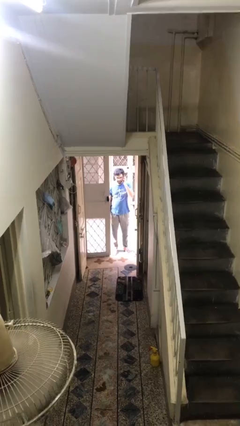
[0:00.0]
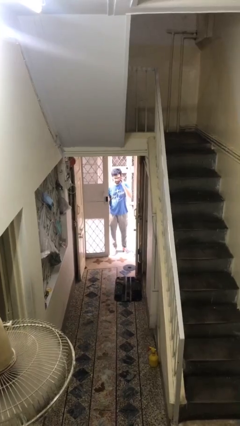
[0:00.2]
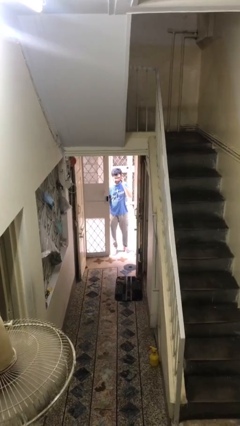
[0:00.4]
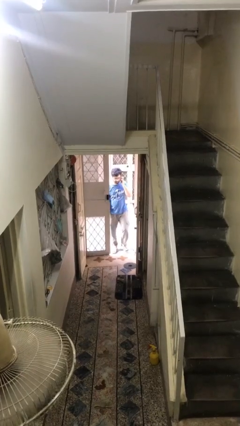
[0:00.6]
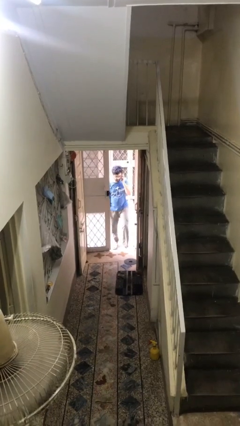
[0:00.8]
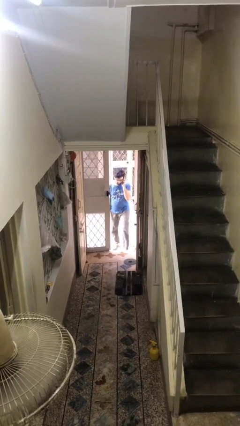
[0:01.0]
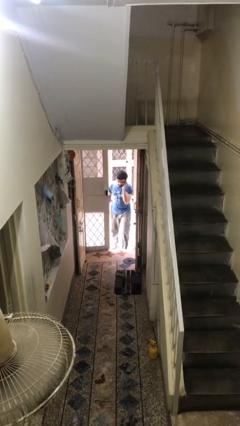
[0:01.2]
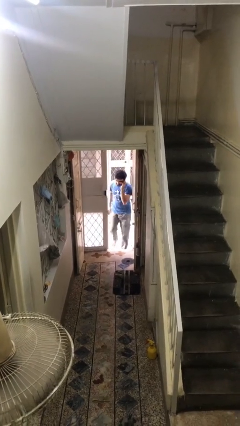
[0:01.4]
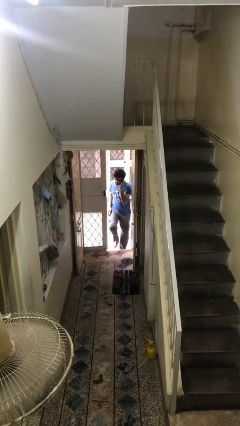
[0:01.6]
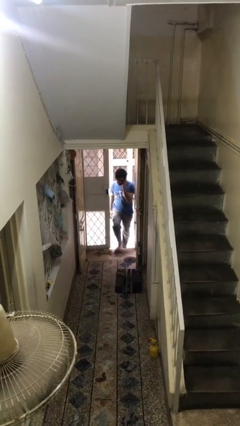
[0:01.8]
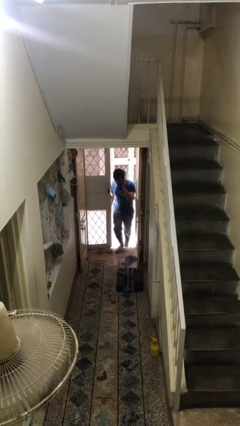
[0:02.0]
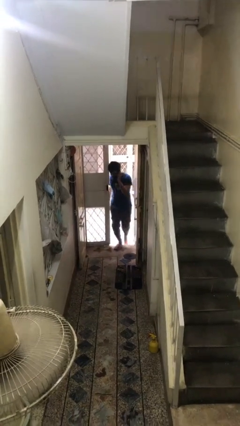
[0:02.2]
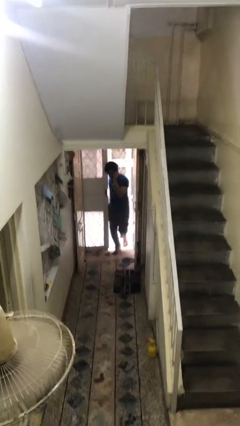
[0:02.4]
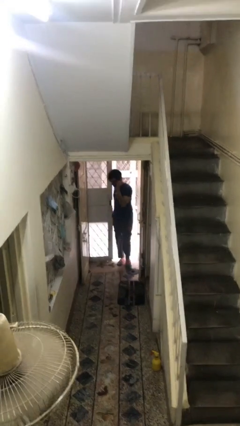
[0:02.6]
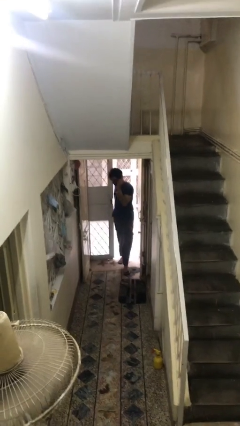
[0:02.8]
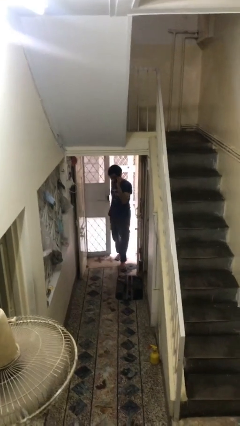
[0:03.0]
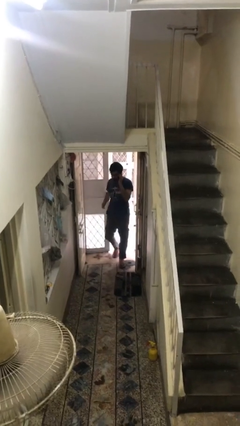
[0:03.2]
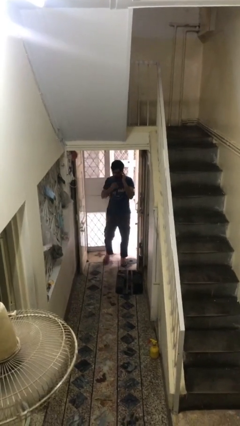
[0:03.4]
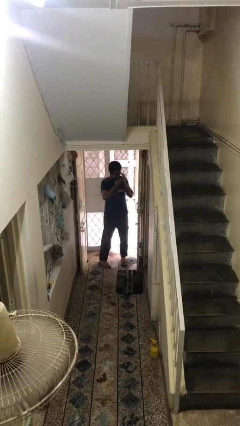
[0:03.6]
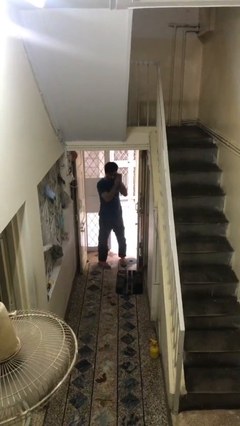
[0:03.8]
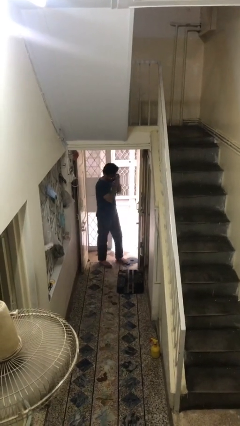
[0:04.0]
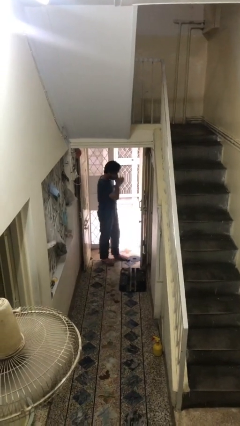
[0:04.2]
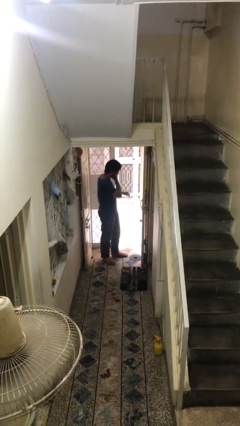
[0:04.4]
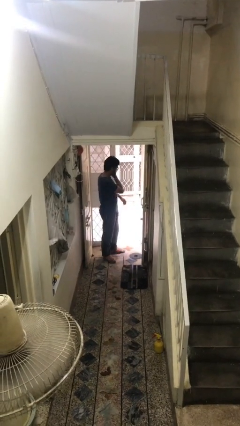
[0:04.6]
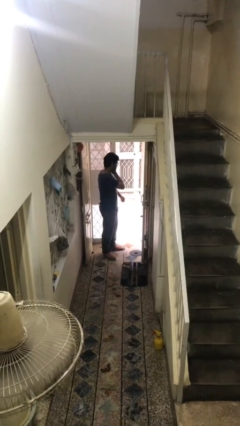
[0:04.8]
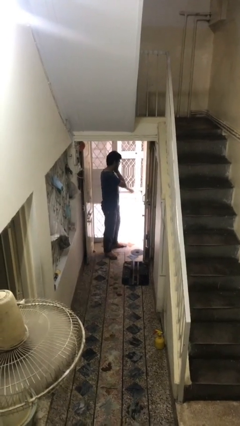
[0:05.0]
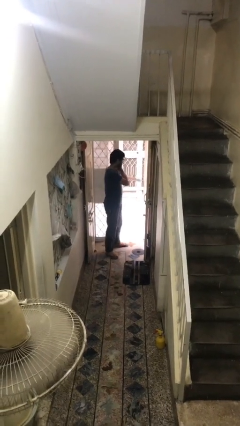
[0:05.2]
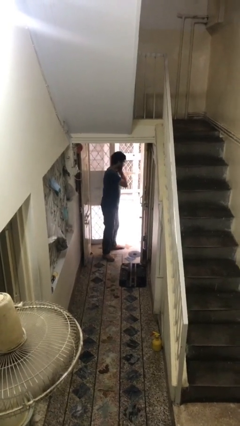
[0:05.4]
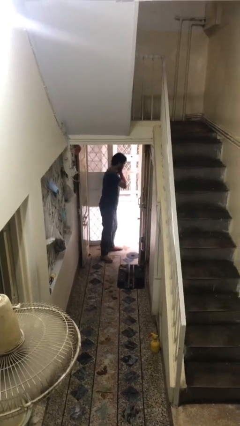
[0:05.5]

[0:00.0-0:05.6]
person enters scene through structure

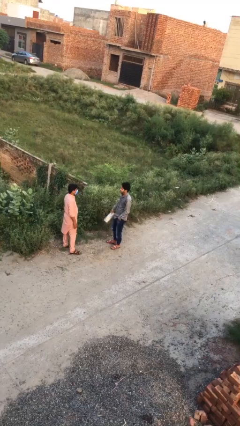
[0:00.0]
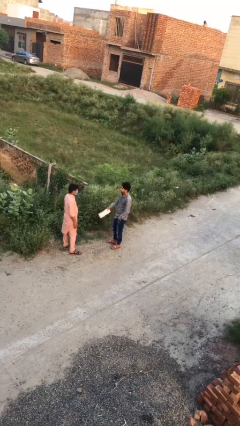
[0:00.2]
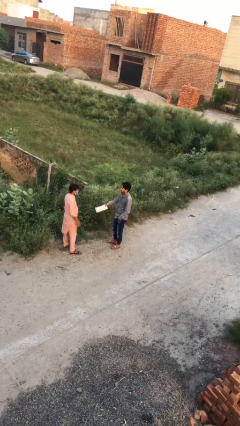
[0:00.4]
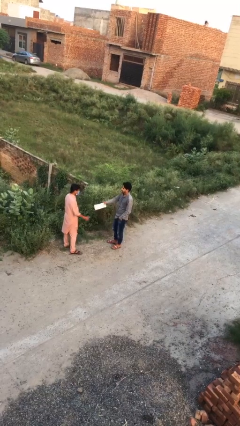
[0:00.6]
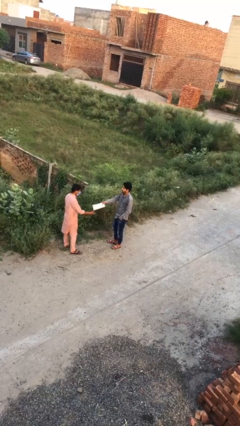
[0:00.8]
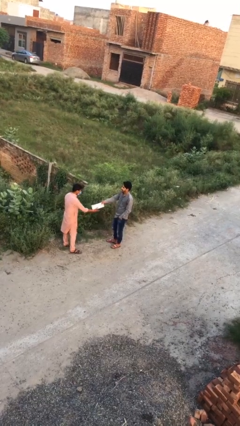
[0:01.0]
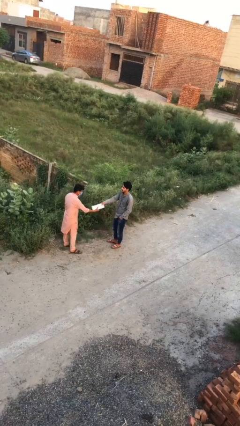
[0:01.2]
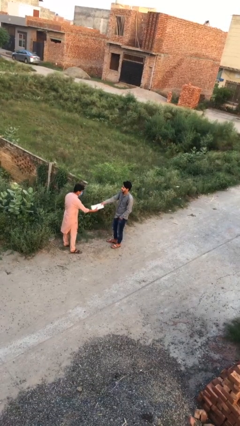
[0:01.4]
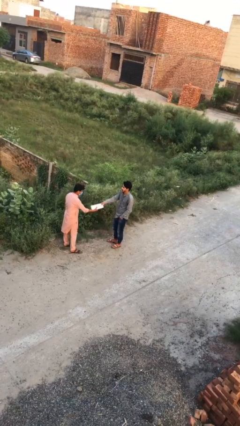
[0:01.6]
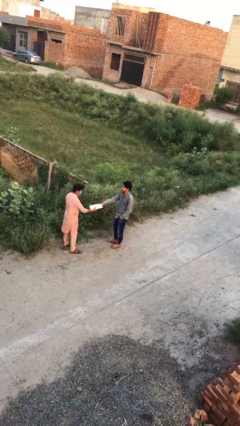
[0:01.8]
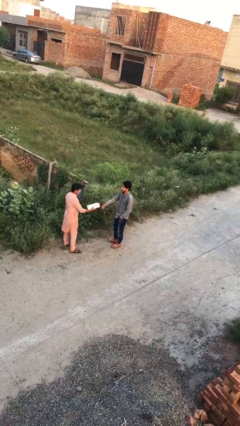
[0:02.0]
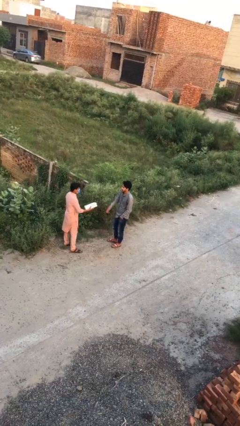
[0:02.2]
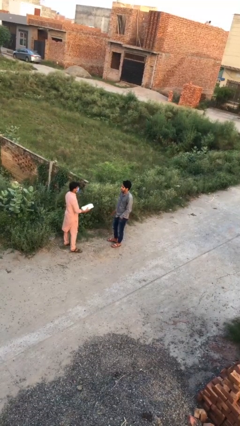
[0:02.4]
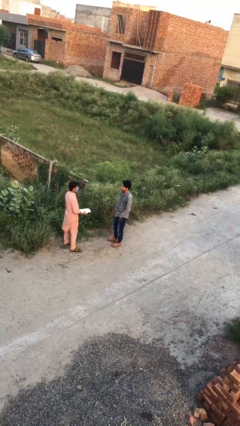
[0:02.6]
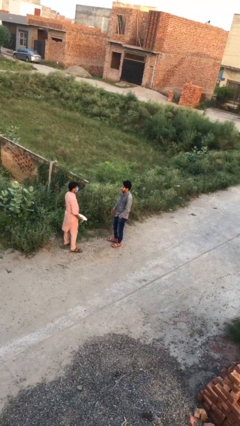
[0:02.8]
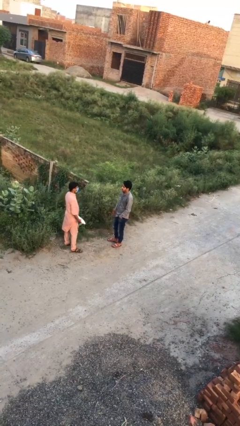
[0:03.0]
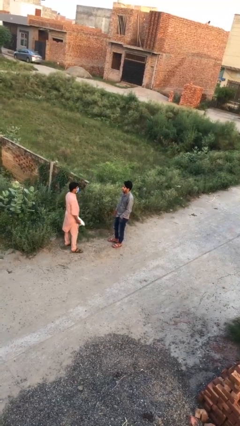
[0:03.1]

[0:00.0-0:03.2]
person transfers object to person

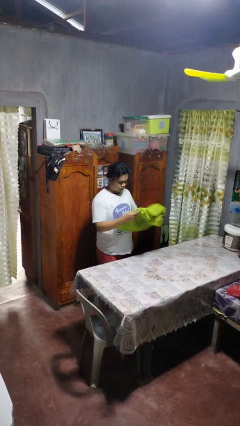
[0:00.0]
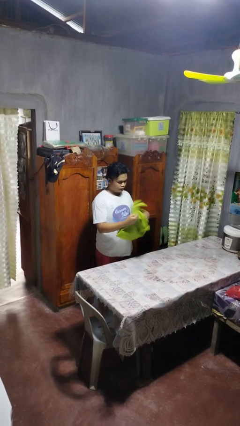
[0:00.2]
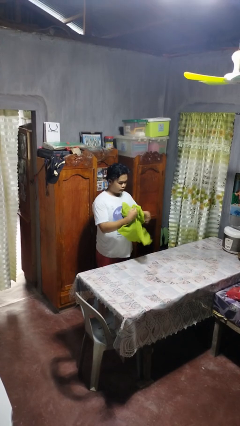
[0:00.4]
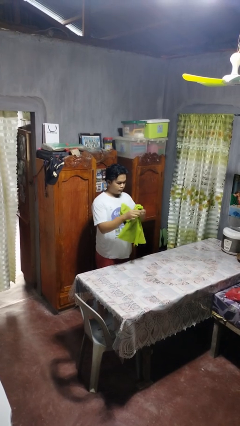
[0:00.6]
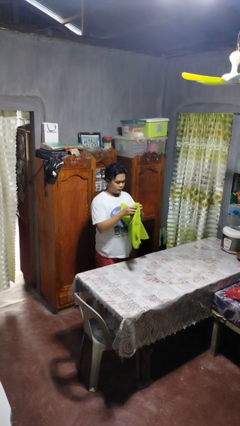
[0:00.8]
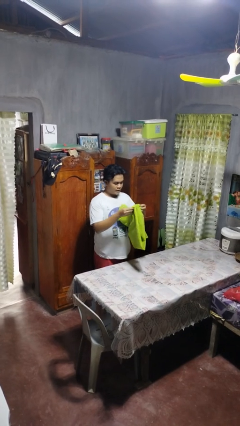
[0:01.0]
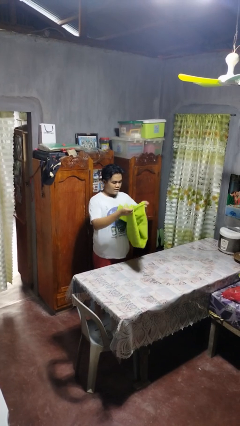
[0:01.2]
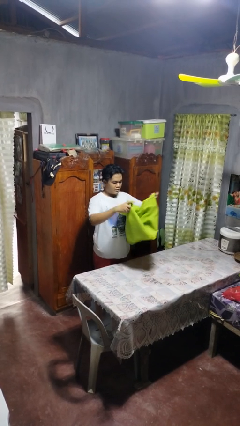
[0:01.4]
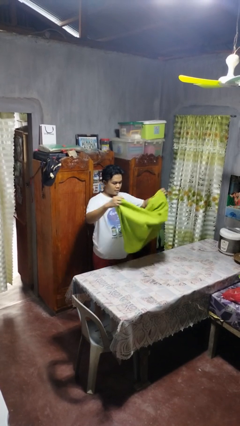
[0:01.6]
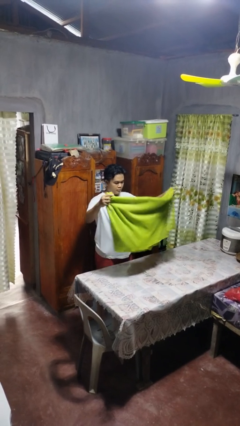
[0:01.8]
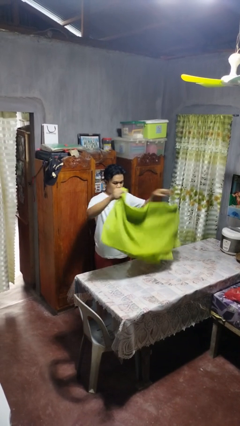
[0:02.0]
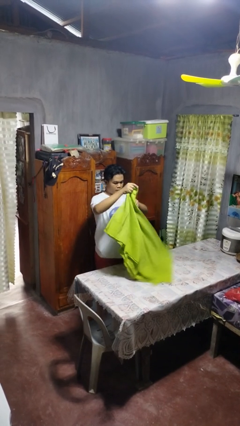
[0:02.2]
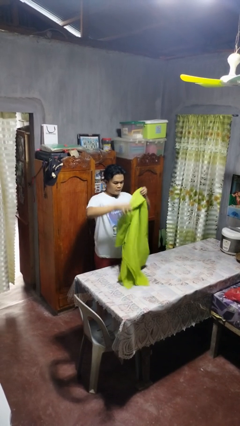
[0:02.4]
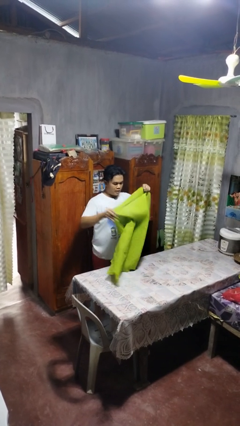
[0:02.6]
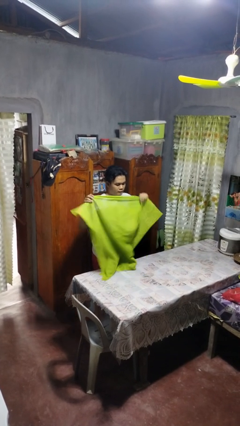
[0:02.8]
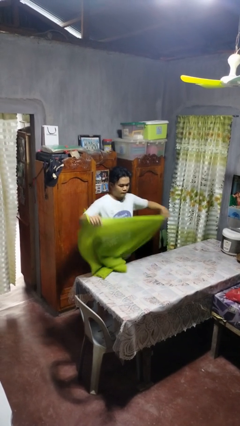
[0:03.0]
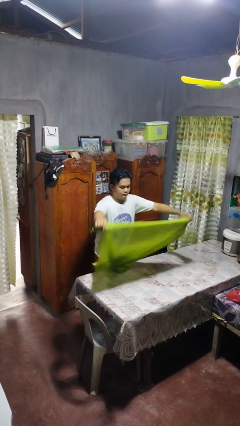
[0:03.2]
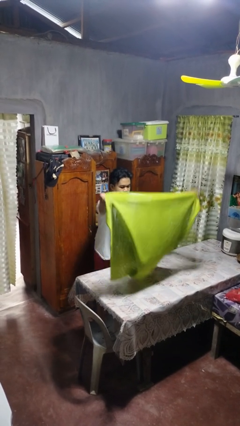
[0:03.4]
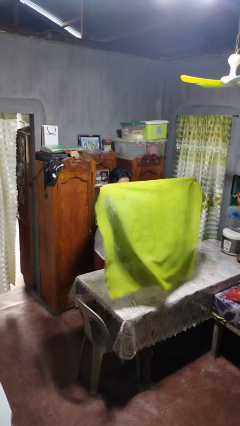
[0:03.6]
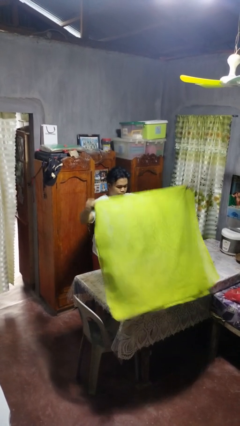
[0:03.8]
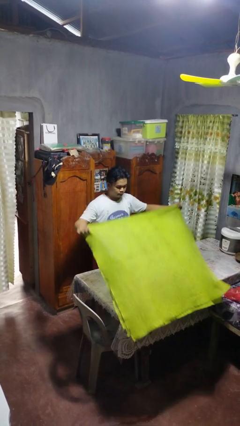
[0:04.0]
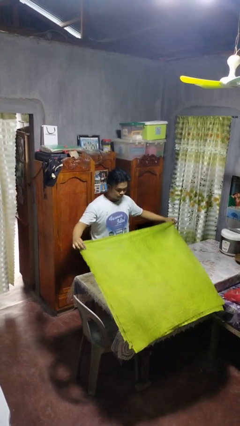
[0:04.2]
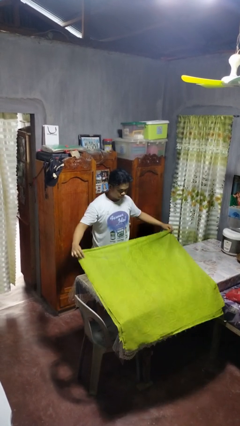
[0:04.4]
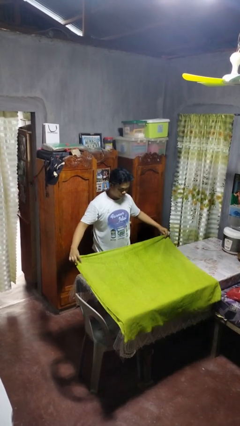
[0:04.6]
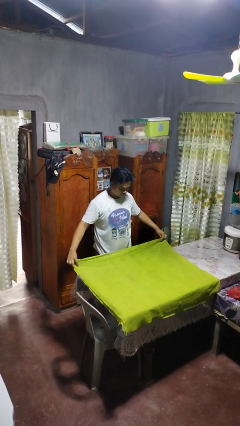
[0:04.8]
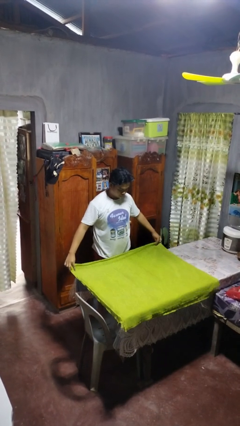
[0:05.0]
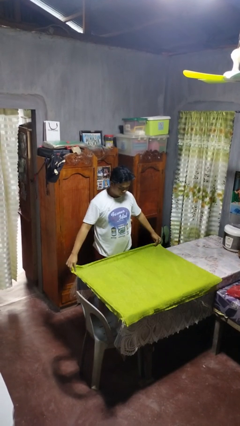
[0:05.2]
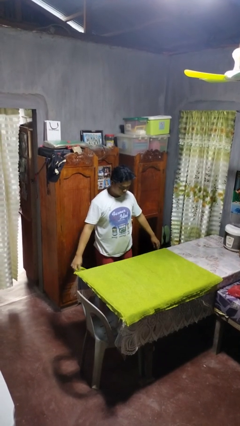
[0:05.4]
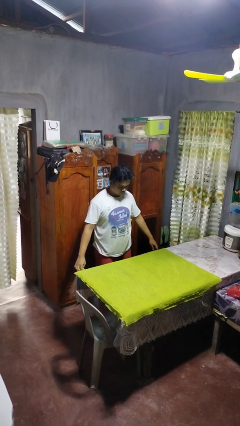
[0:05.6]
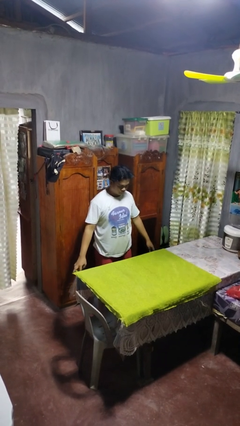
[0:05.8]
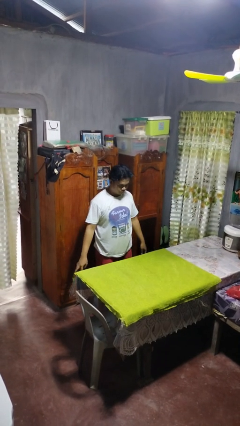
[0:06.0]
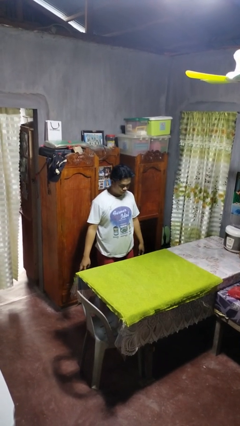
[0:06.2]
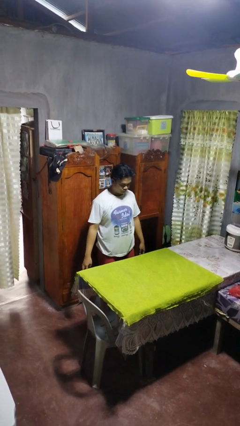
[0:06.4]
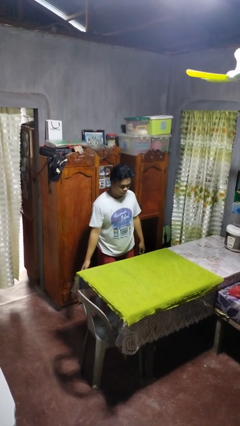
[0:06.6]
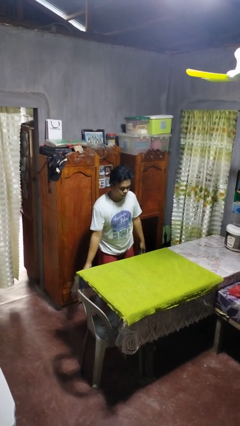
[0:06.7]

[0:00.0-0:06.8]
person spreads tablecloth

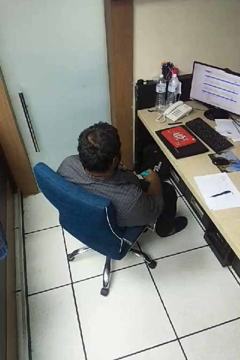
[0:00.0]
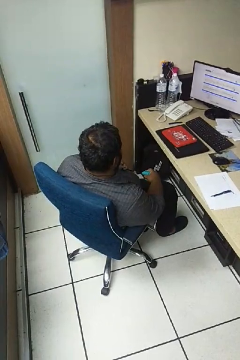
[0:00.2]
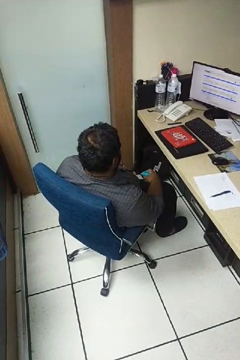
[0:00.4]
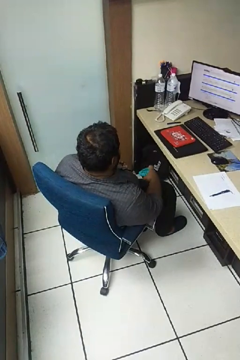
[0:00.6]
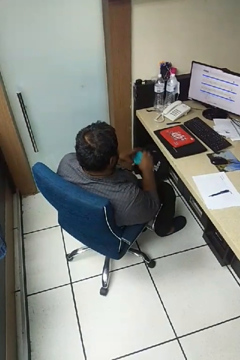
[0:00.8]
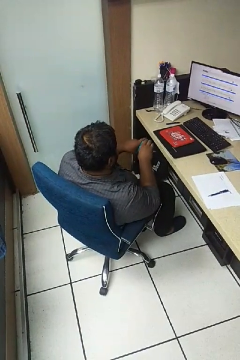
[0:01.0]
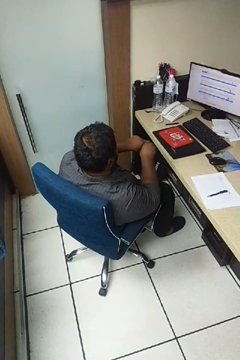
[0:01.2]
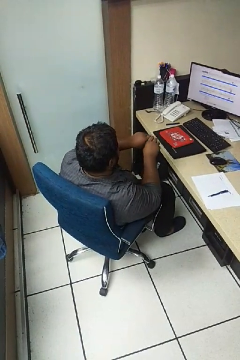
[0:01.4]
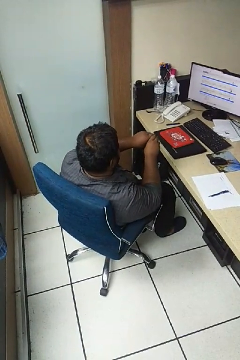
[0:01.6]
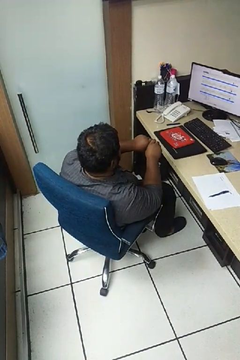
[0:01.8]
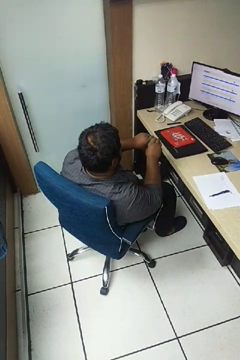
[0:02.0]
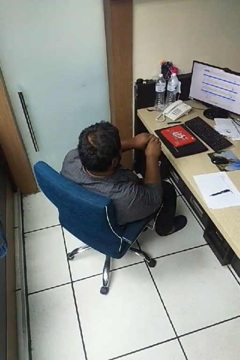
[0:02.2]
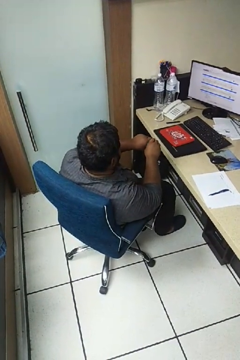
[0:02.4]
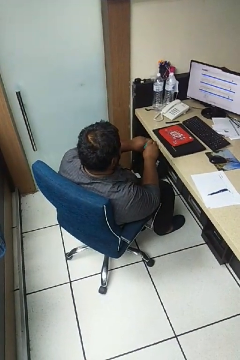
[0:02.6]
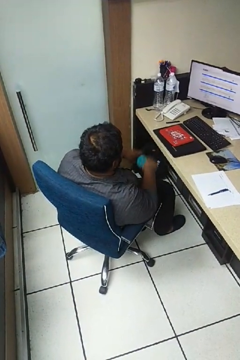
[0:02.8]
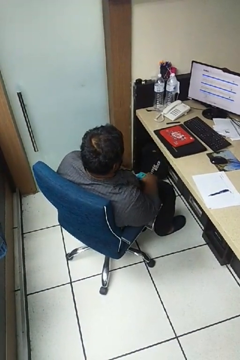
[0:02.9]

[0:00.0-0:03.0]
person squeezes object
